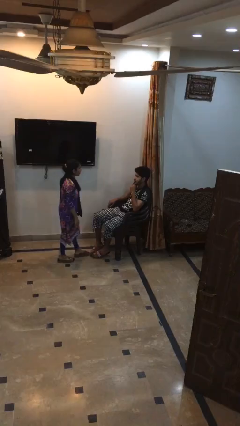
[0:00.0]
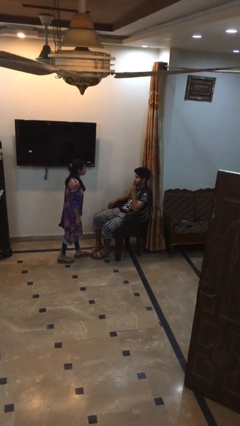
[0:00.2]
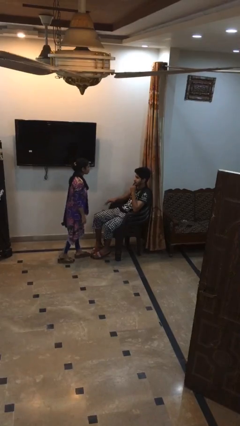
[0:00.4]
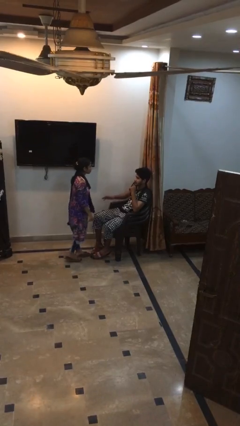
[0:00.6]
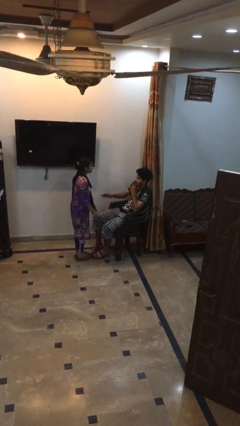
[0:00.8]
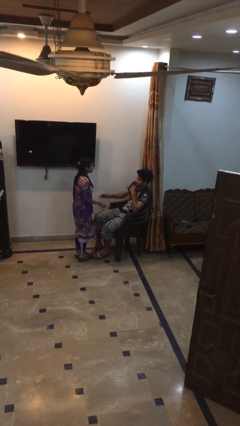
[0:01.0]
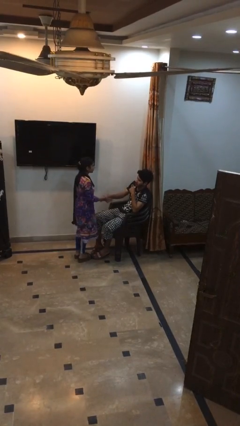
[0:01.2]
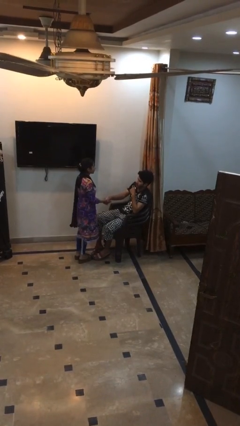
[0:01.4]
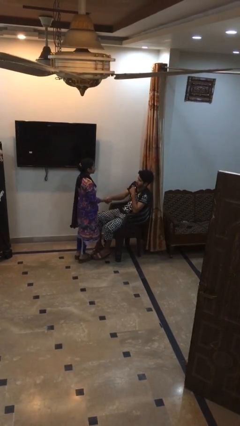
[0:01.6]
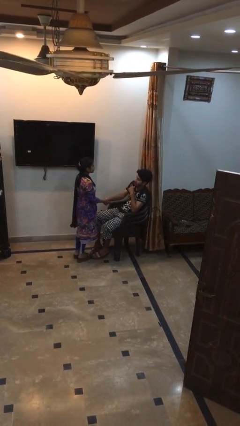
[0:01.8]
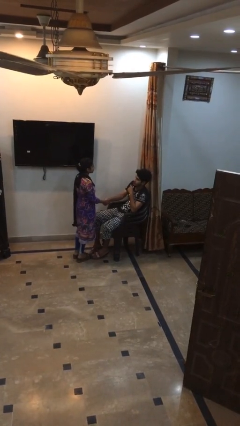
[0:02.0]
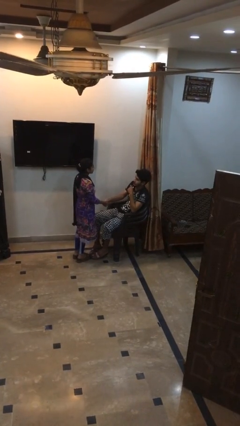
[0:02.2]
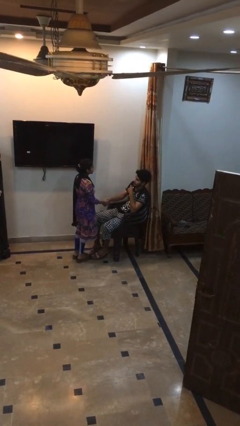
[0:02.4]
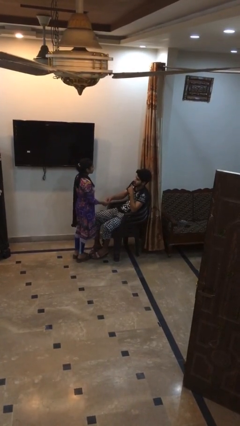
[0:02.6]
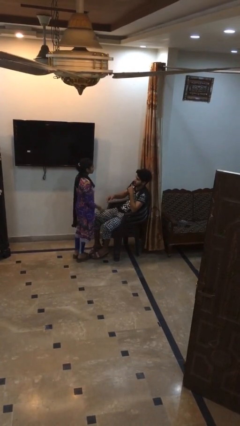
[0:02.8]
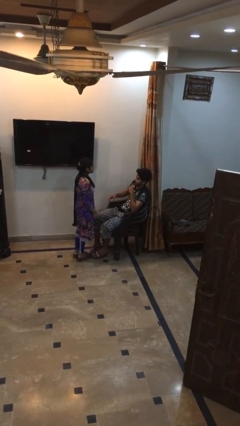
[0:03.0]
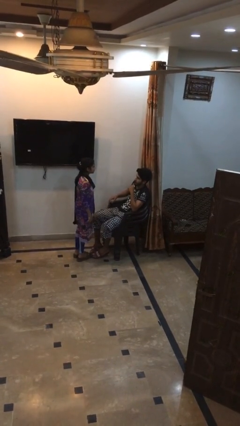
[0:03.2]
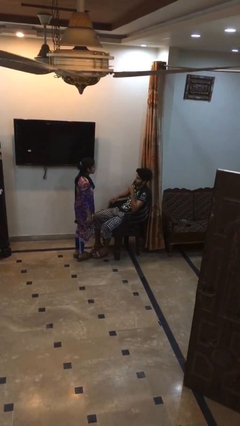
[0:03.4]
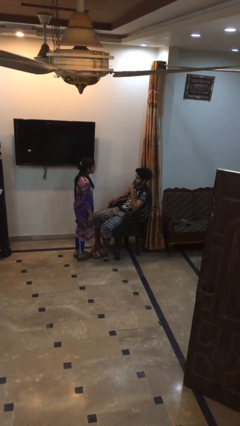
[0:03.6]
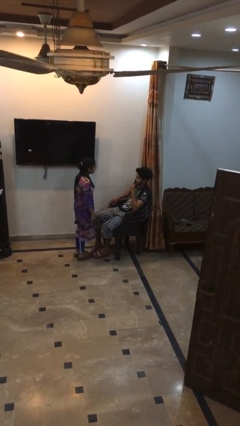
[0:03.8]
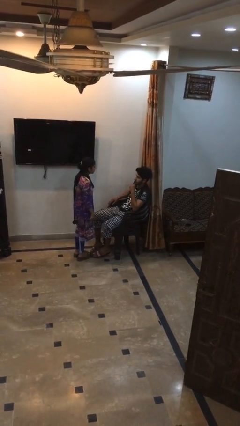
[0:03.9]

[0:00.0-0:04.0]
person shakes hand

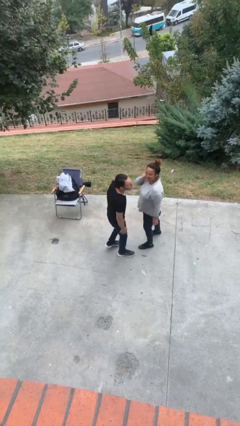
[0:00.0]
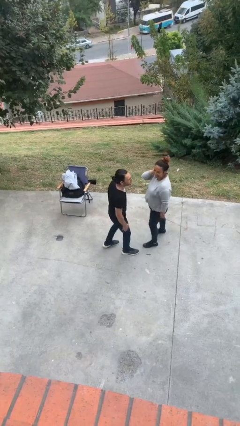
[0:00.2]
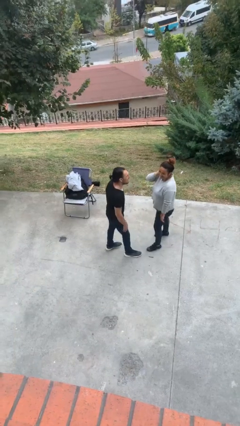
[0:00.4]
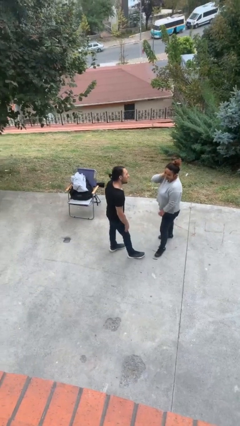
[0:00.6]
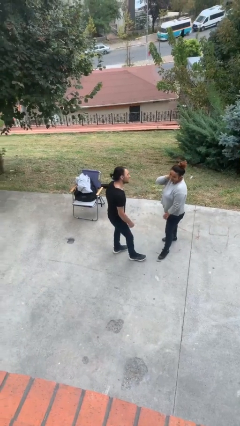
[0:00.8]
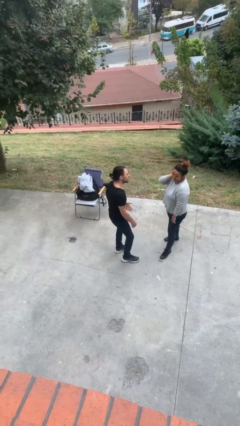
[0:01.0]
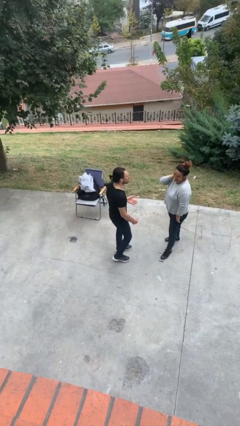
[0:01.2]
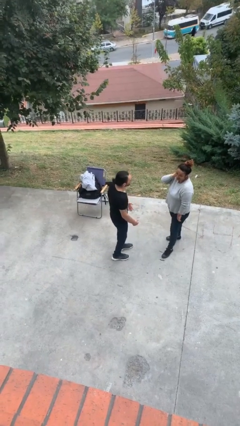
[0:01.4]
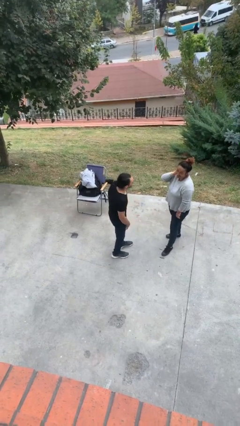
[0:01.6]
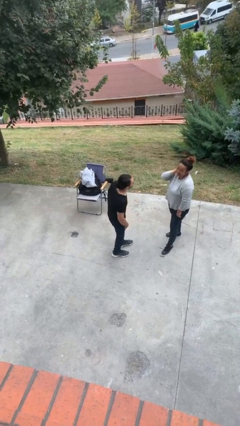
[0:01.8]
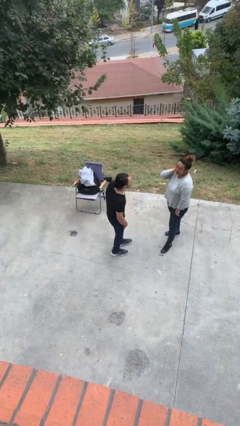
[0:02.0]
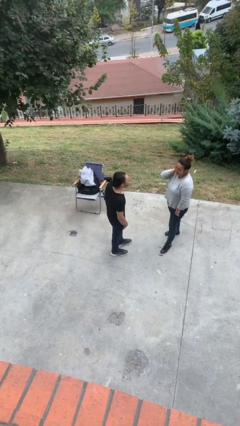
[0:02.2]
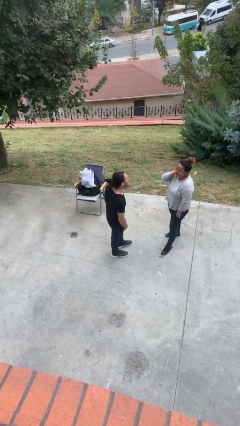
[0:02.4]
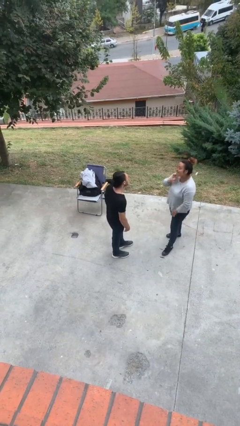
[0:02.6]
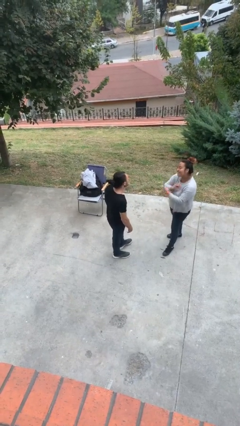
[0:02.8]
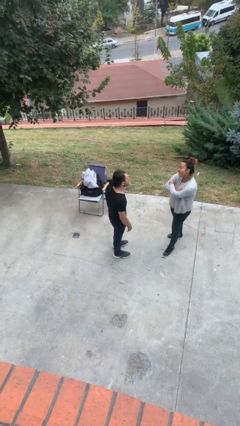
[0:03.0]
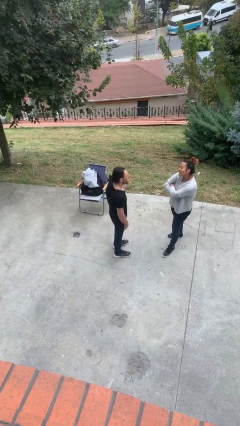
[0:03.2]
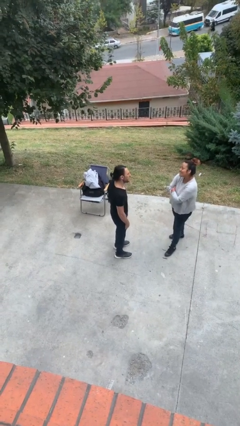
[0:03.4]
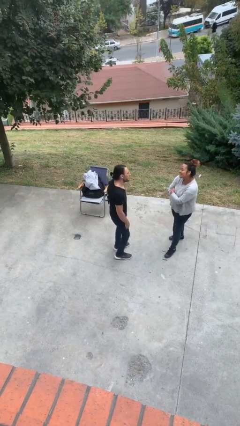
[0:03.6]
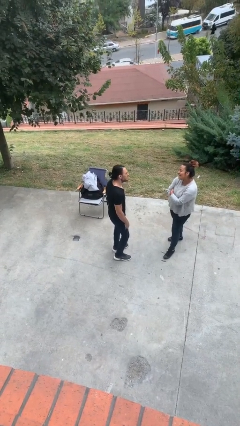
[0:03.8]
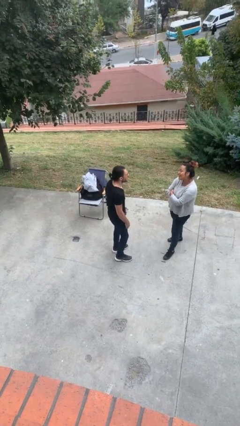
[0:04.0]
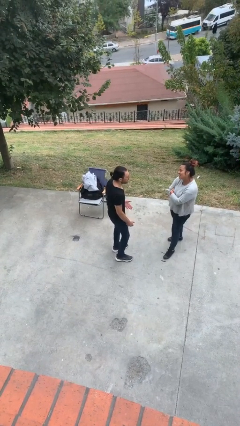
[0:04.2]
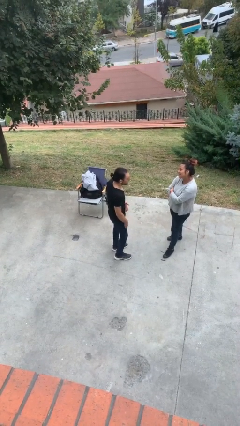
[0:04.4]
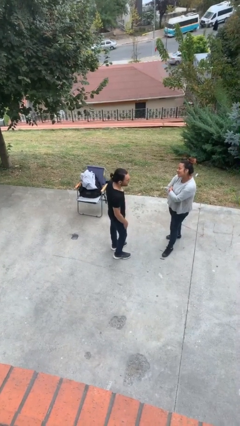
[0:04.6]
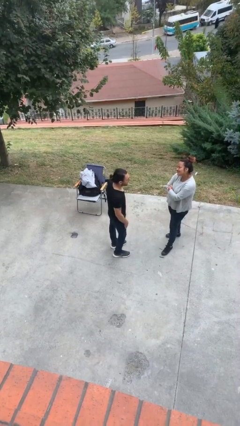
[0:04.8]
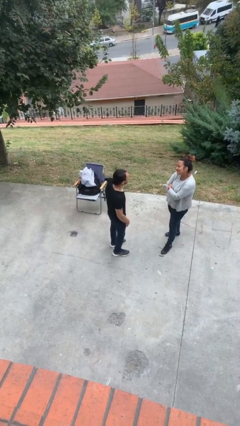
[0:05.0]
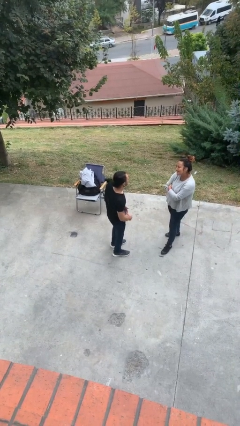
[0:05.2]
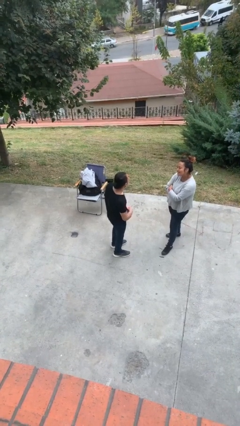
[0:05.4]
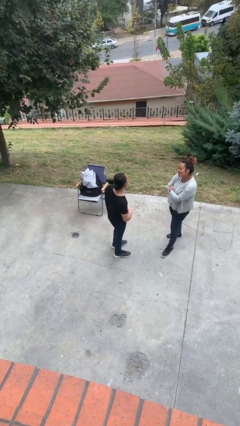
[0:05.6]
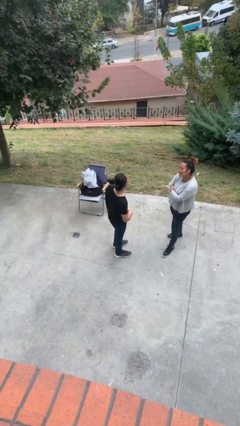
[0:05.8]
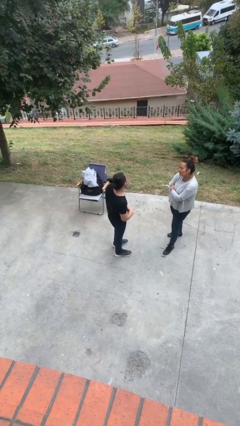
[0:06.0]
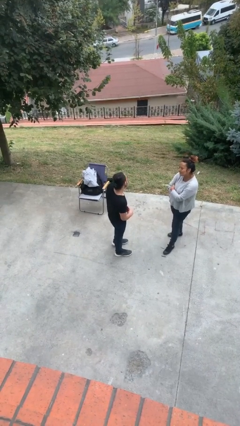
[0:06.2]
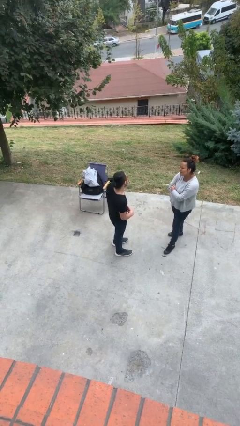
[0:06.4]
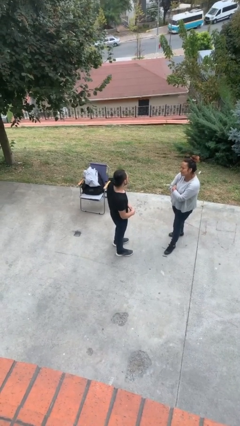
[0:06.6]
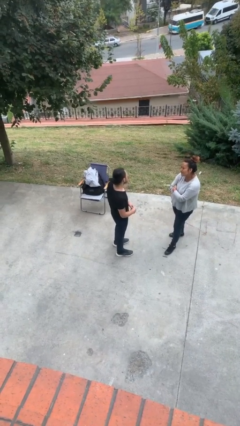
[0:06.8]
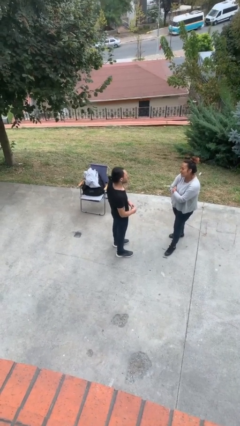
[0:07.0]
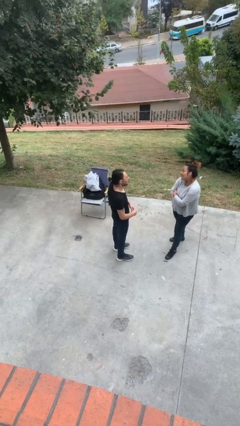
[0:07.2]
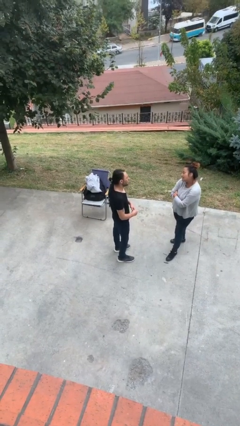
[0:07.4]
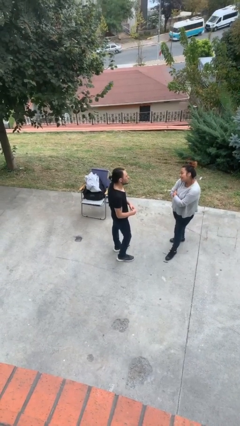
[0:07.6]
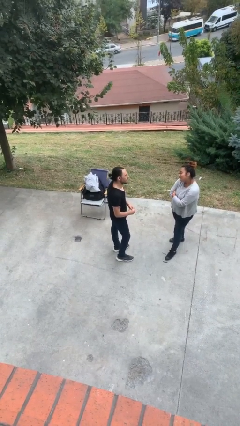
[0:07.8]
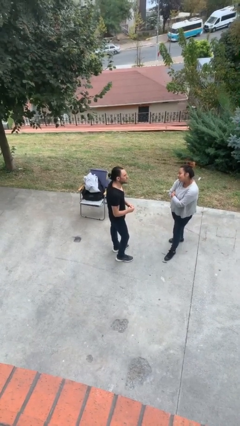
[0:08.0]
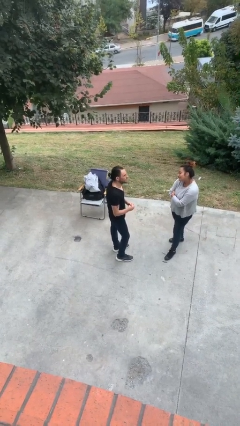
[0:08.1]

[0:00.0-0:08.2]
person talks to person

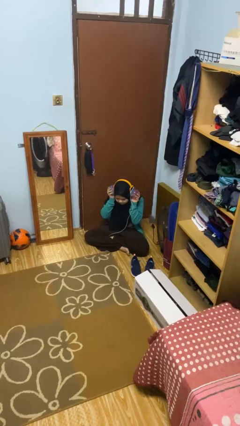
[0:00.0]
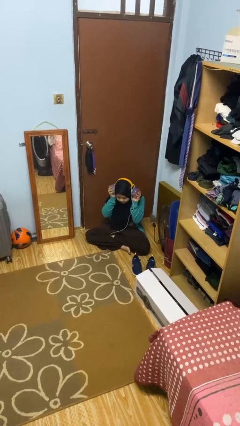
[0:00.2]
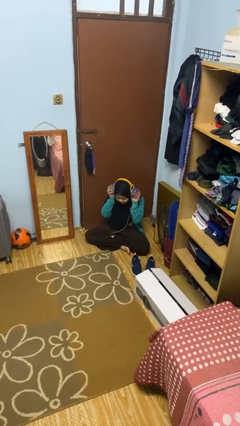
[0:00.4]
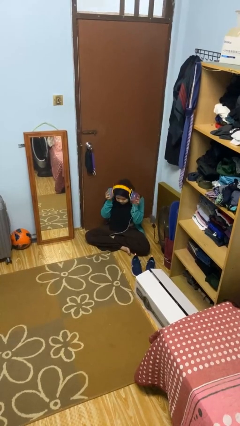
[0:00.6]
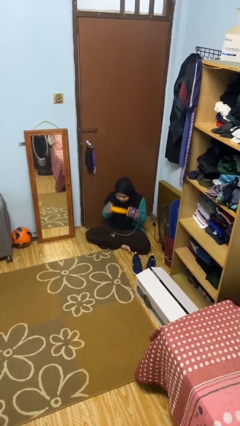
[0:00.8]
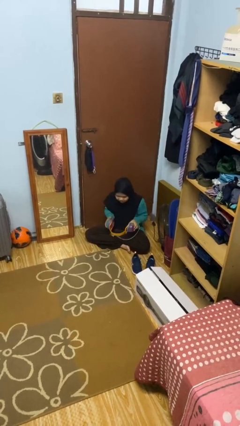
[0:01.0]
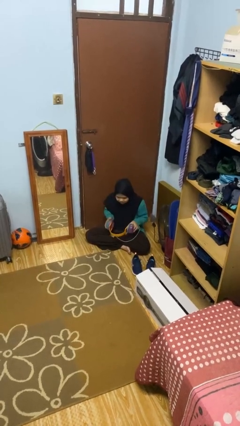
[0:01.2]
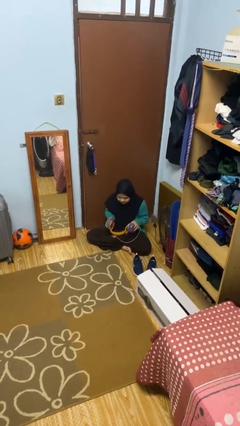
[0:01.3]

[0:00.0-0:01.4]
person takes off headphones

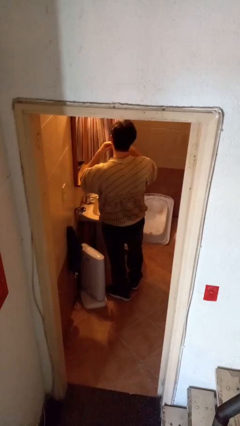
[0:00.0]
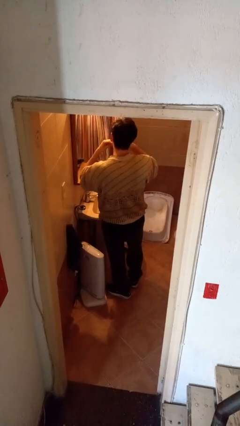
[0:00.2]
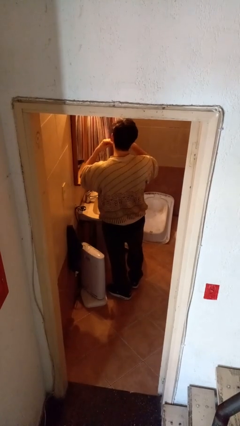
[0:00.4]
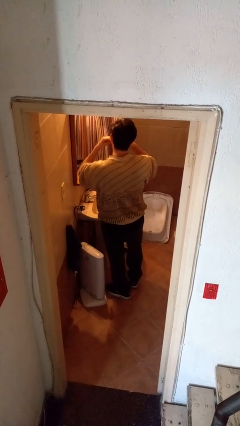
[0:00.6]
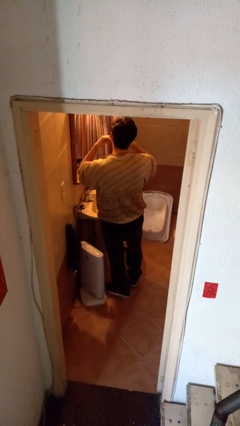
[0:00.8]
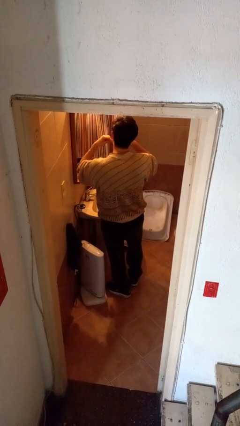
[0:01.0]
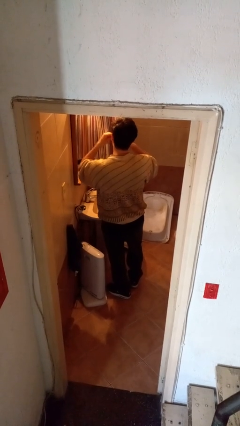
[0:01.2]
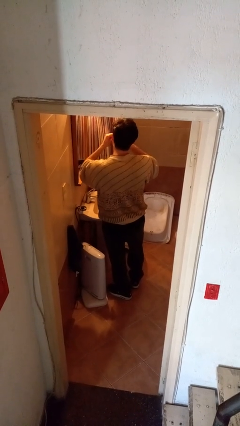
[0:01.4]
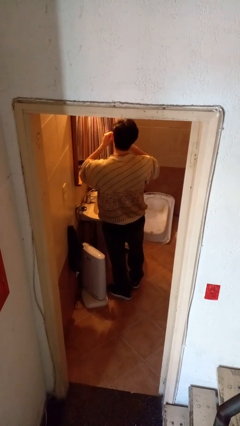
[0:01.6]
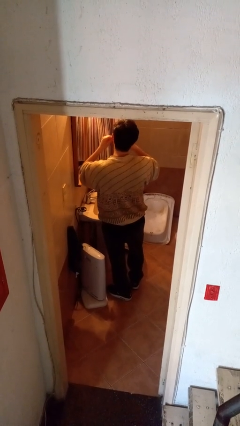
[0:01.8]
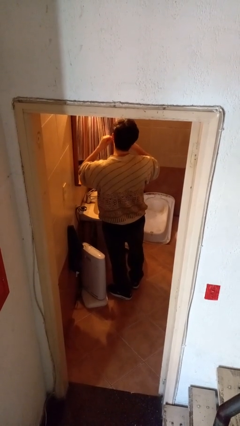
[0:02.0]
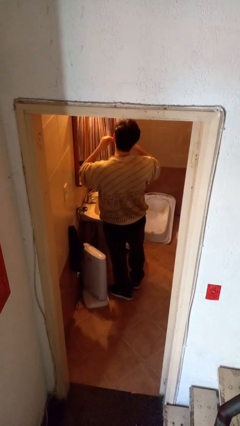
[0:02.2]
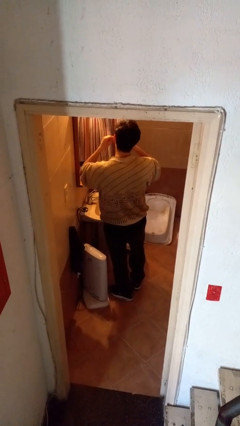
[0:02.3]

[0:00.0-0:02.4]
person flosses

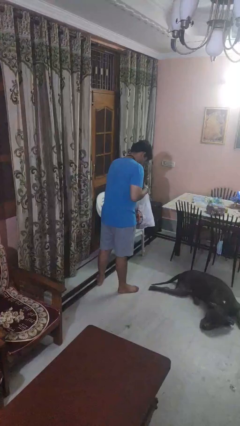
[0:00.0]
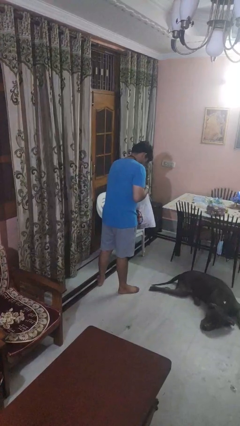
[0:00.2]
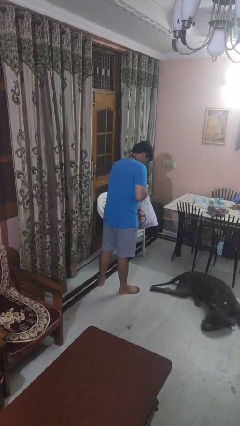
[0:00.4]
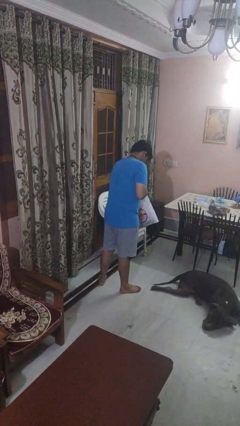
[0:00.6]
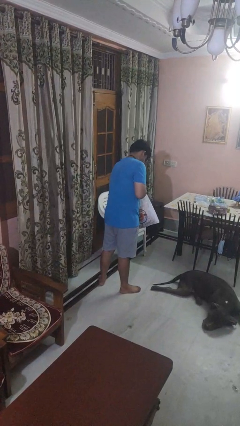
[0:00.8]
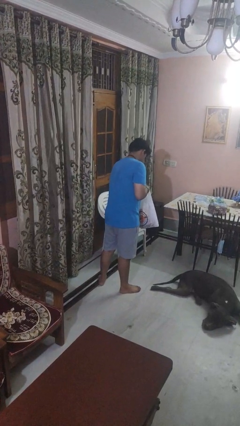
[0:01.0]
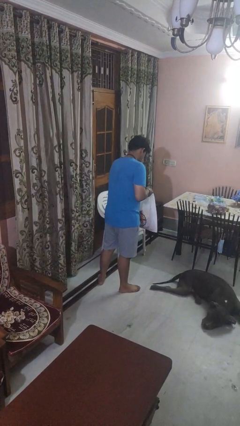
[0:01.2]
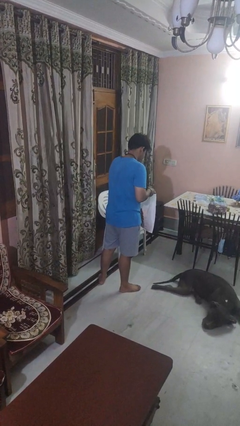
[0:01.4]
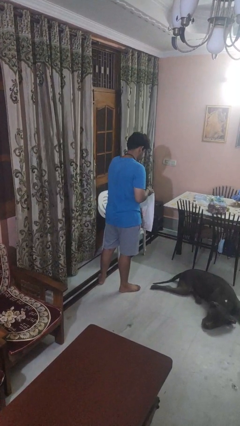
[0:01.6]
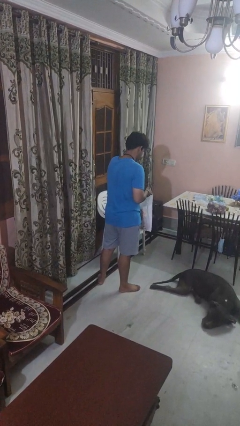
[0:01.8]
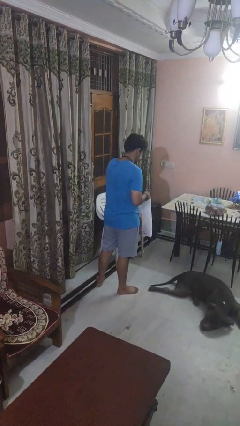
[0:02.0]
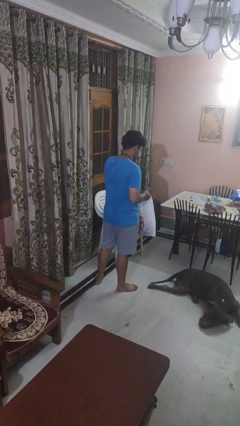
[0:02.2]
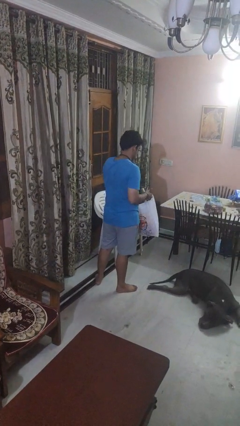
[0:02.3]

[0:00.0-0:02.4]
person takes object from bag
